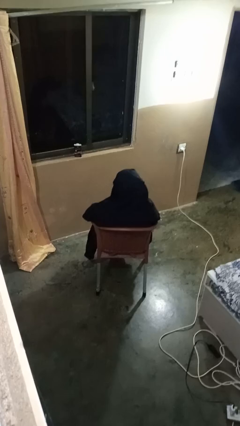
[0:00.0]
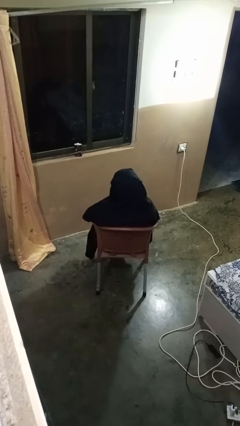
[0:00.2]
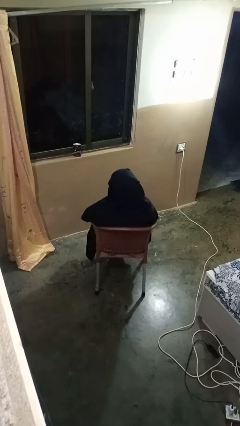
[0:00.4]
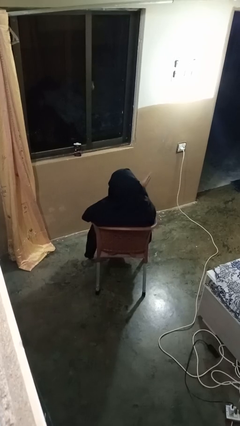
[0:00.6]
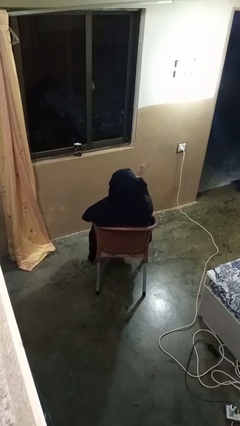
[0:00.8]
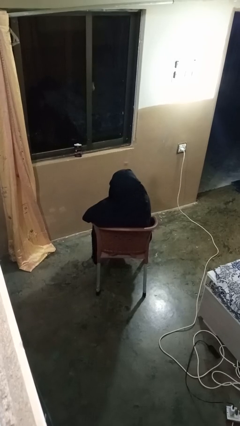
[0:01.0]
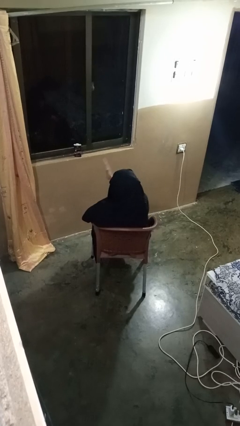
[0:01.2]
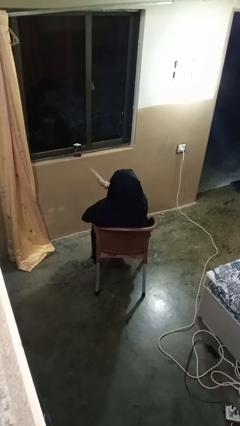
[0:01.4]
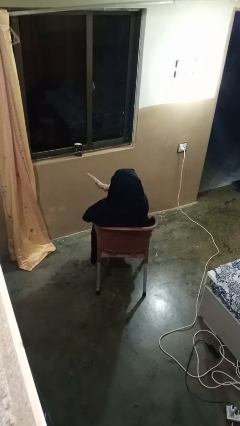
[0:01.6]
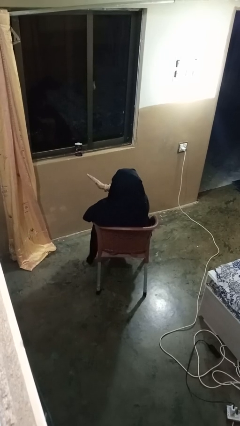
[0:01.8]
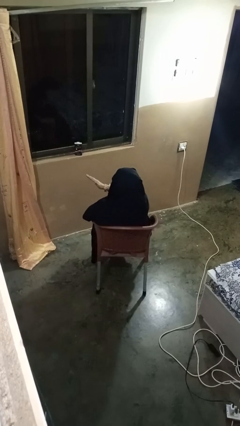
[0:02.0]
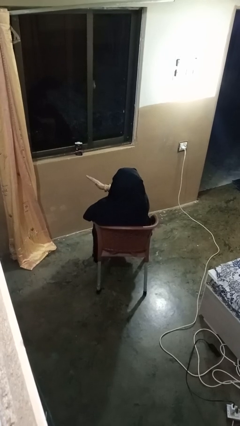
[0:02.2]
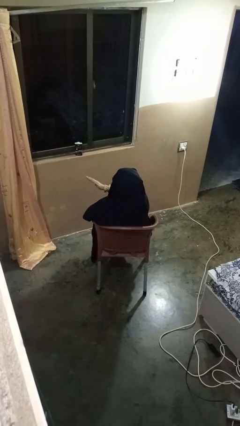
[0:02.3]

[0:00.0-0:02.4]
person gestures swipe left

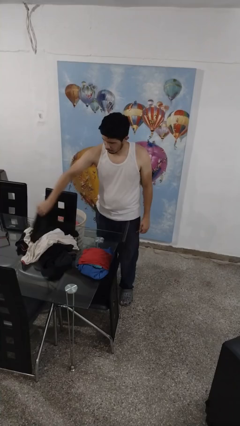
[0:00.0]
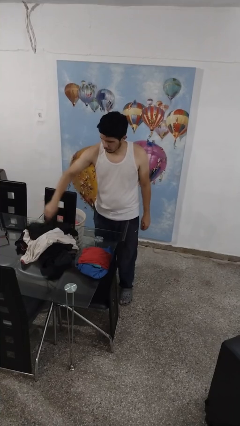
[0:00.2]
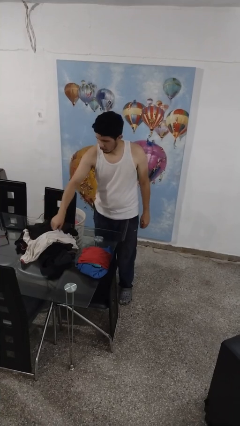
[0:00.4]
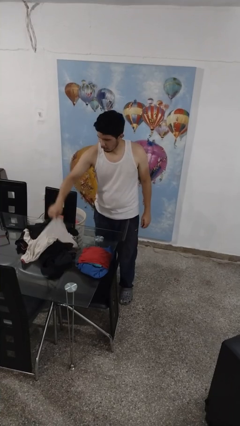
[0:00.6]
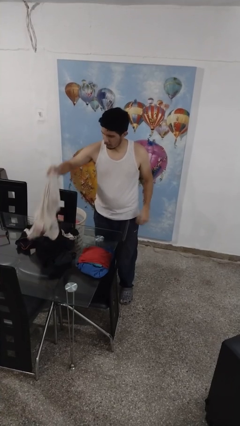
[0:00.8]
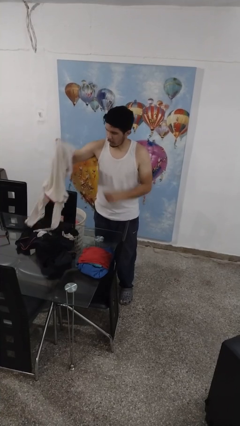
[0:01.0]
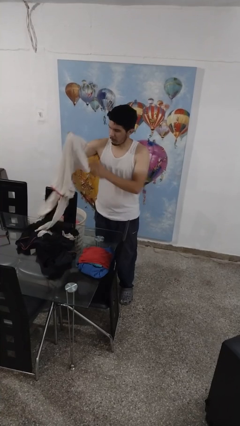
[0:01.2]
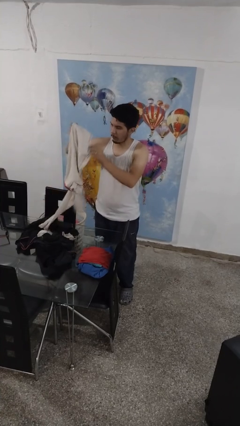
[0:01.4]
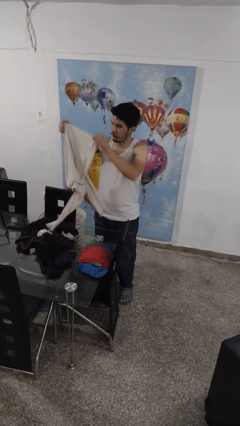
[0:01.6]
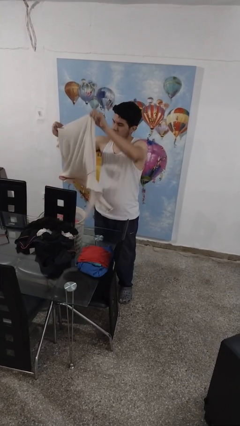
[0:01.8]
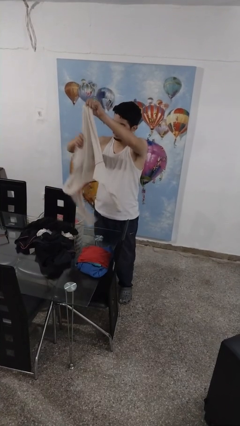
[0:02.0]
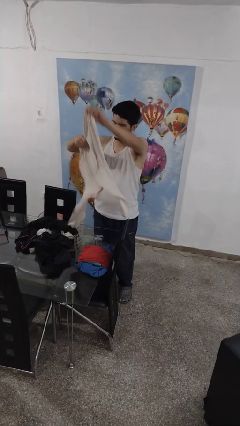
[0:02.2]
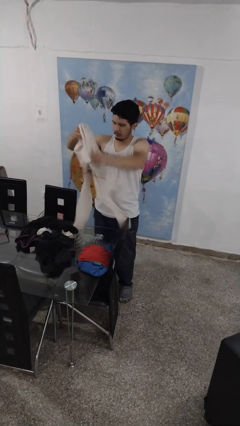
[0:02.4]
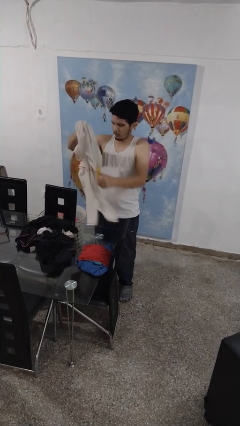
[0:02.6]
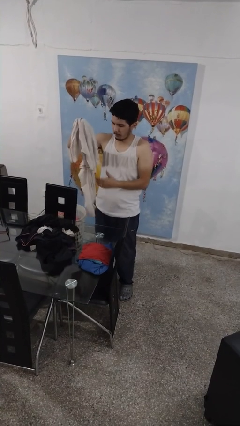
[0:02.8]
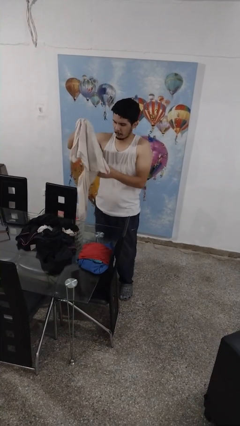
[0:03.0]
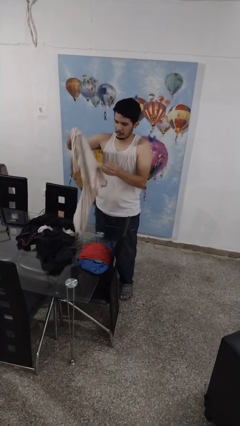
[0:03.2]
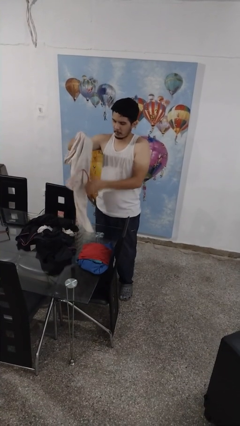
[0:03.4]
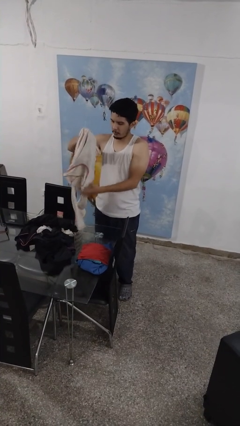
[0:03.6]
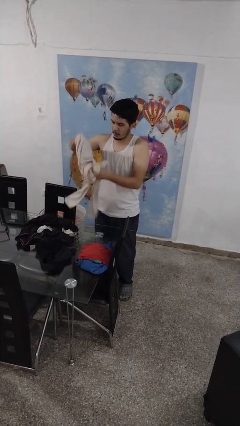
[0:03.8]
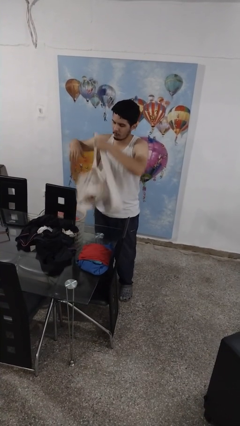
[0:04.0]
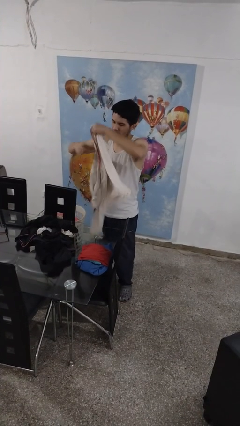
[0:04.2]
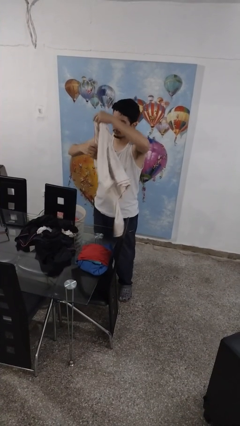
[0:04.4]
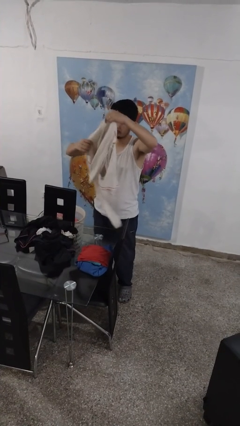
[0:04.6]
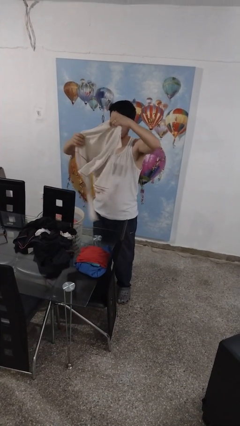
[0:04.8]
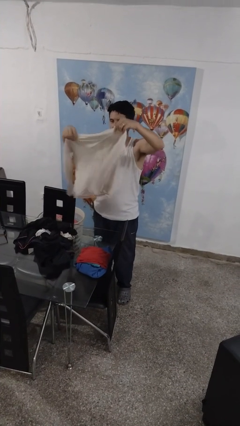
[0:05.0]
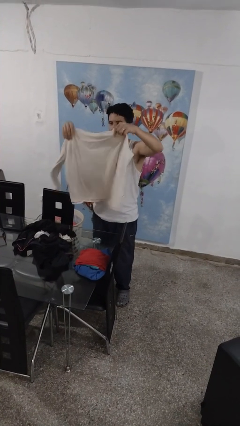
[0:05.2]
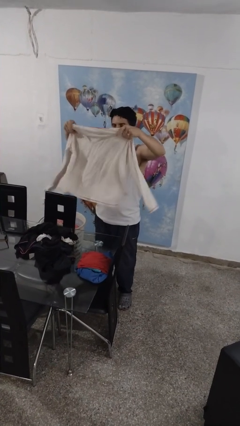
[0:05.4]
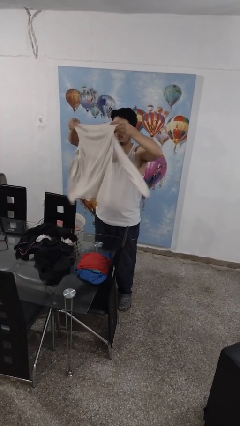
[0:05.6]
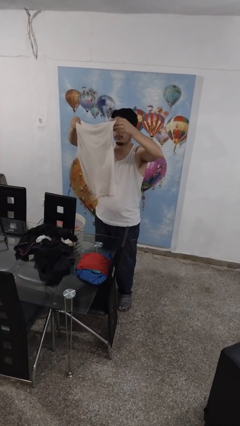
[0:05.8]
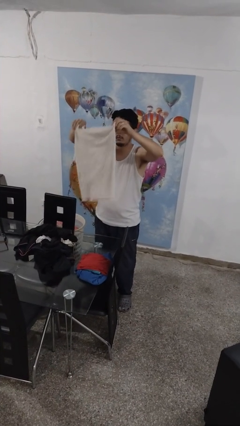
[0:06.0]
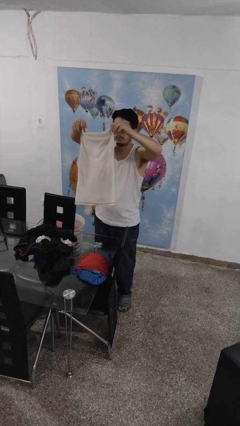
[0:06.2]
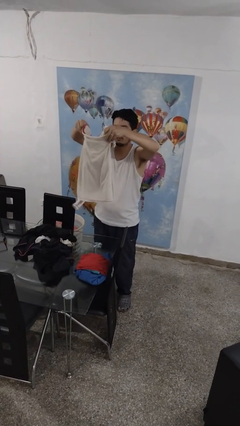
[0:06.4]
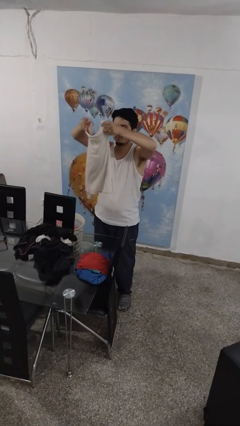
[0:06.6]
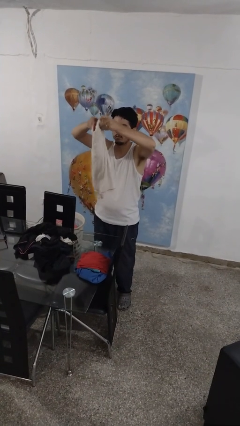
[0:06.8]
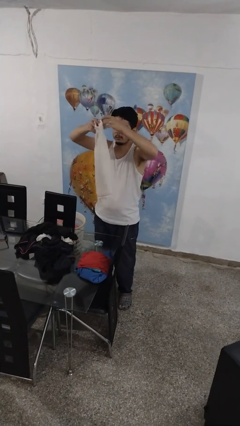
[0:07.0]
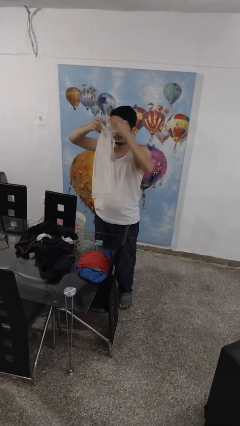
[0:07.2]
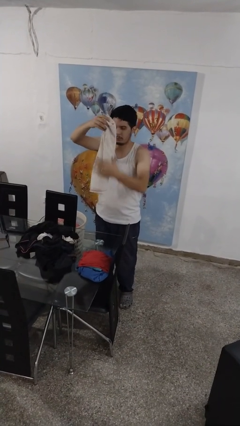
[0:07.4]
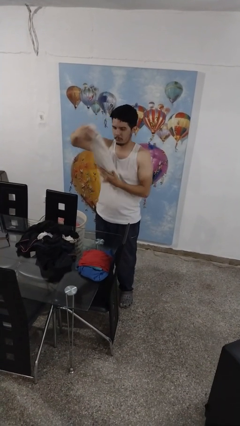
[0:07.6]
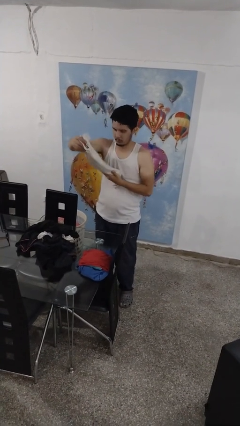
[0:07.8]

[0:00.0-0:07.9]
person folds shirt

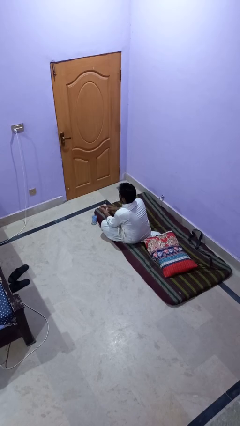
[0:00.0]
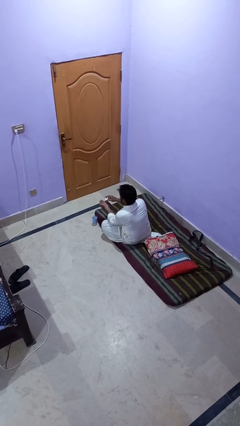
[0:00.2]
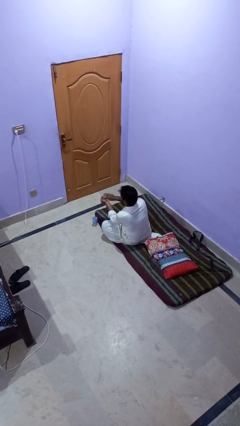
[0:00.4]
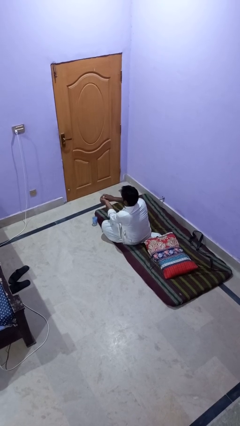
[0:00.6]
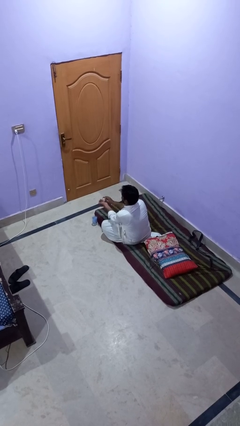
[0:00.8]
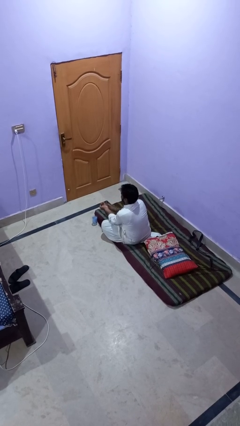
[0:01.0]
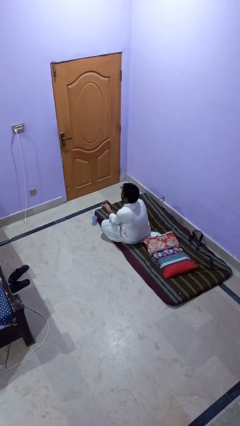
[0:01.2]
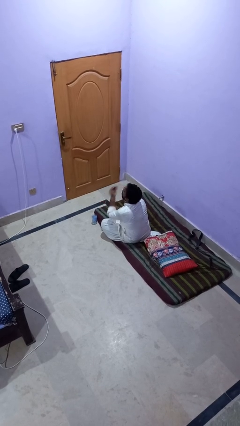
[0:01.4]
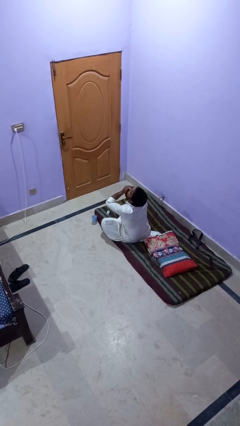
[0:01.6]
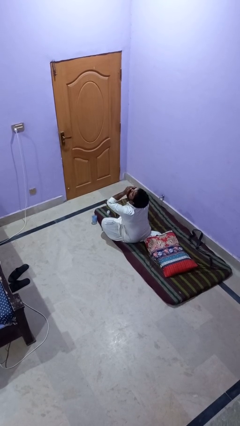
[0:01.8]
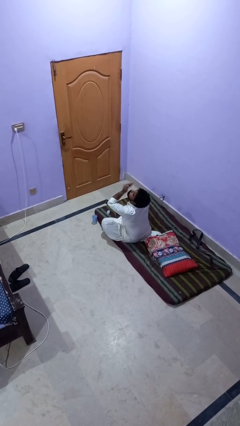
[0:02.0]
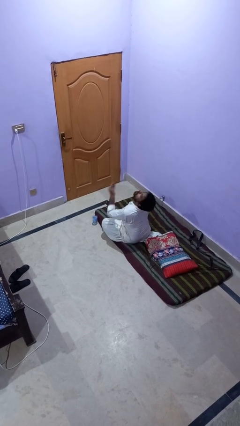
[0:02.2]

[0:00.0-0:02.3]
person takes medicine pills

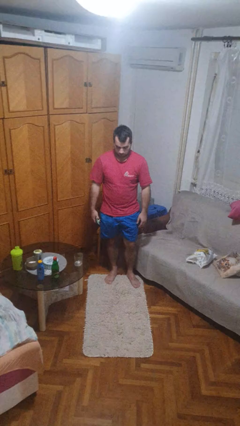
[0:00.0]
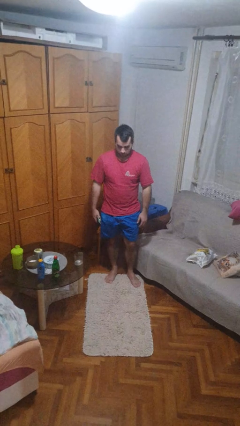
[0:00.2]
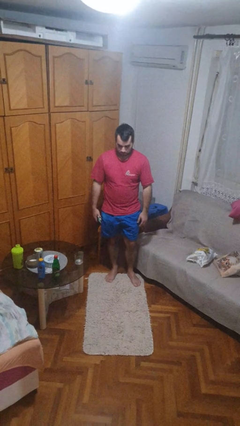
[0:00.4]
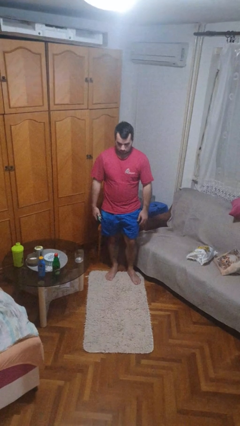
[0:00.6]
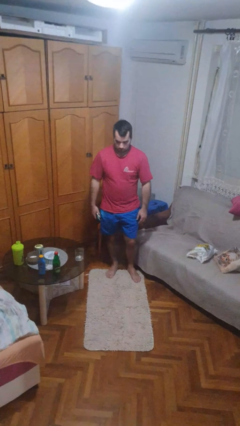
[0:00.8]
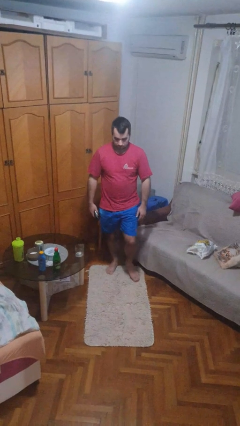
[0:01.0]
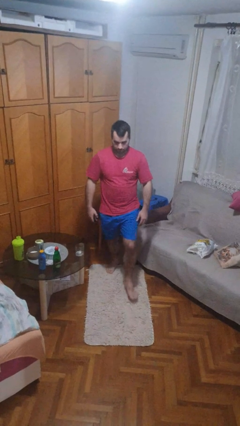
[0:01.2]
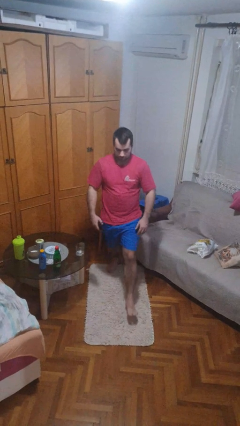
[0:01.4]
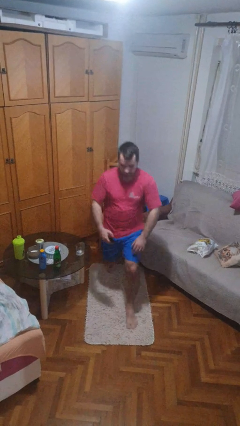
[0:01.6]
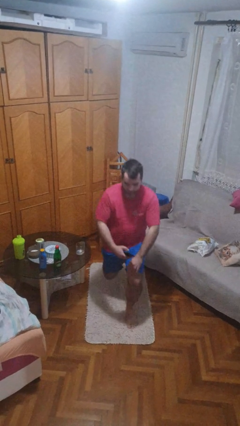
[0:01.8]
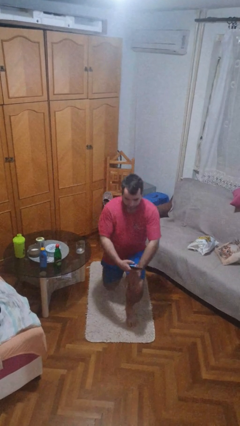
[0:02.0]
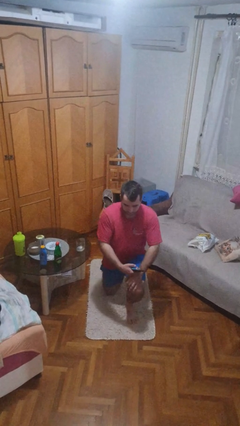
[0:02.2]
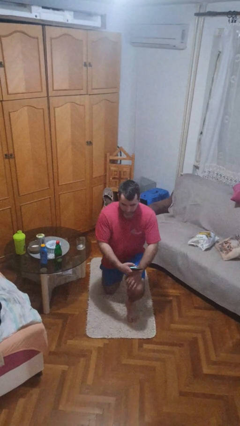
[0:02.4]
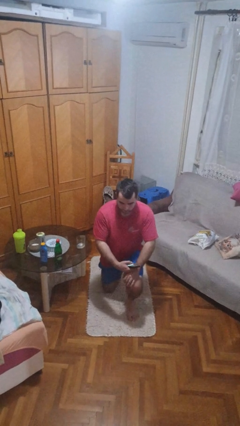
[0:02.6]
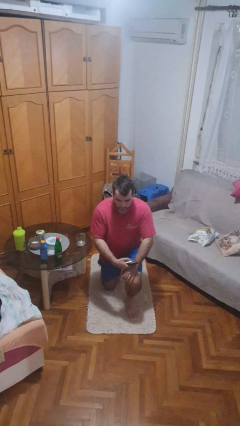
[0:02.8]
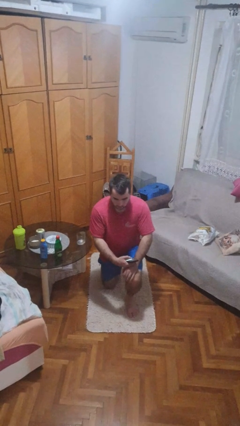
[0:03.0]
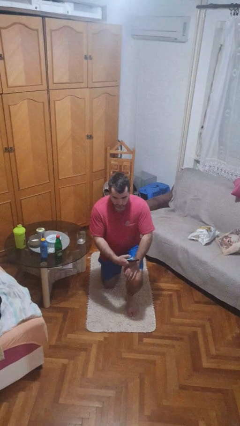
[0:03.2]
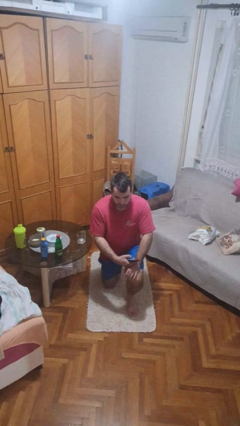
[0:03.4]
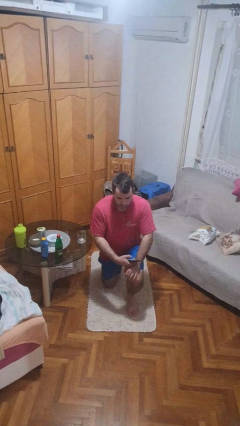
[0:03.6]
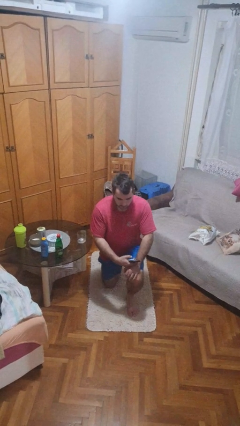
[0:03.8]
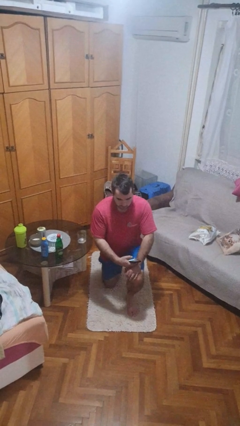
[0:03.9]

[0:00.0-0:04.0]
person kneels

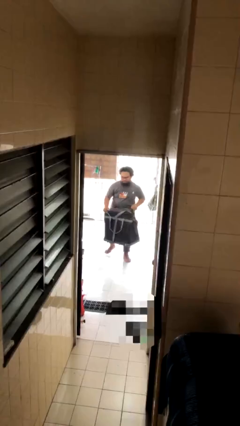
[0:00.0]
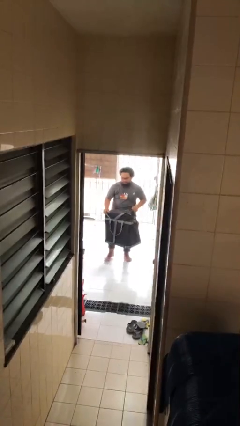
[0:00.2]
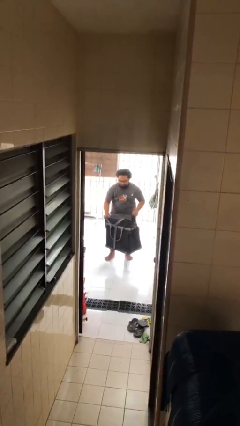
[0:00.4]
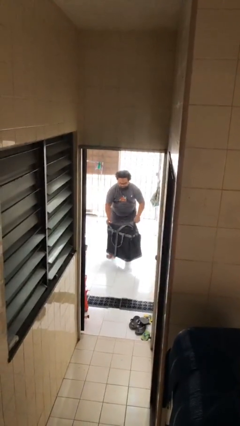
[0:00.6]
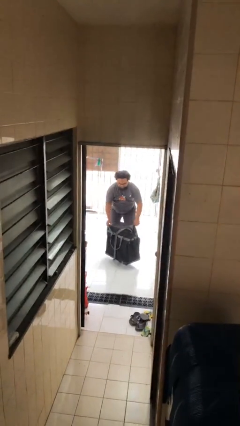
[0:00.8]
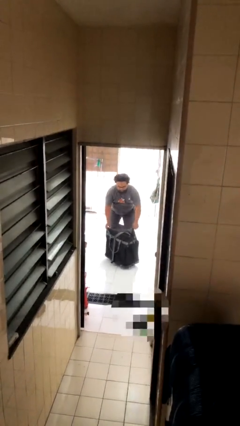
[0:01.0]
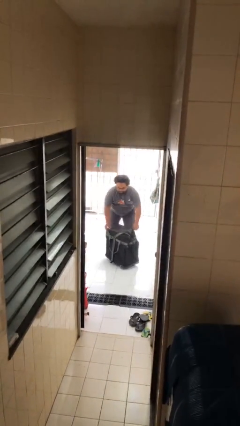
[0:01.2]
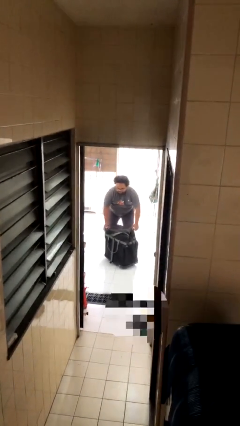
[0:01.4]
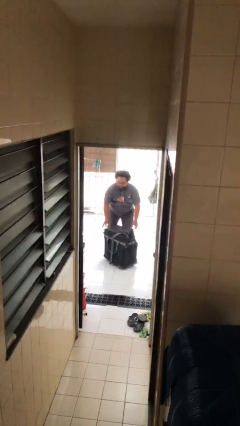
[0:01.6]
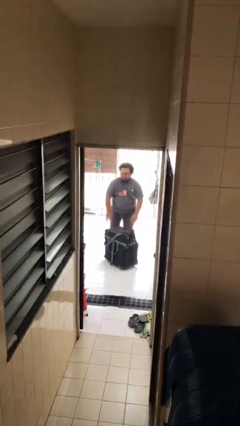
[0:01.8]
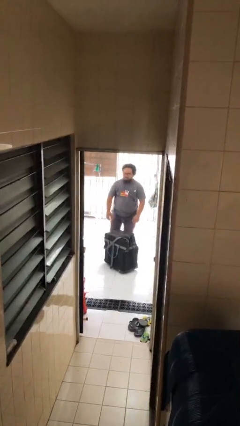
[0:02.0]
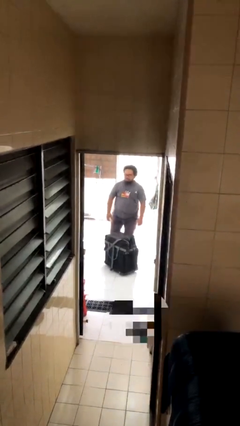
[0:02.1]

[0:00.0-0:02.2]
person puts down object on floor
